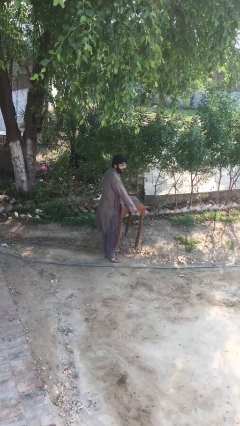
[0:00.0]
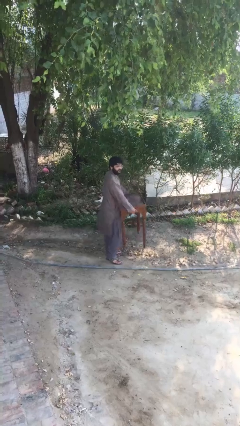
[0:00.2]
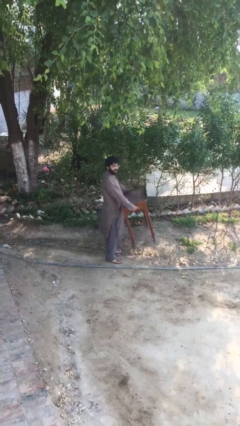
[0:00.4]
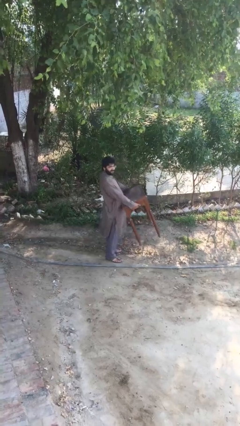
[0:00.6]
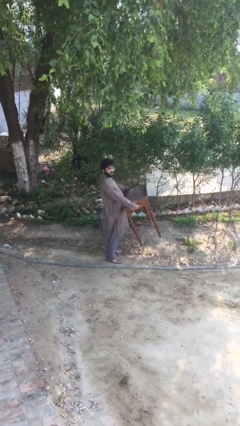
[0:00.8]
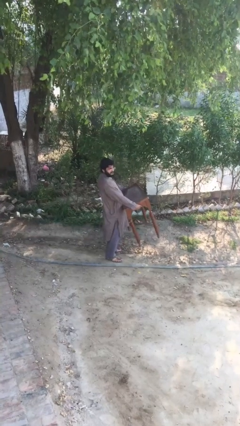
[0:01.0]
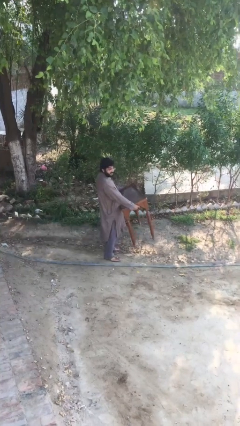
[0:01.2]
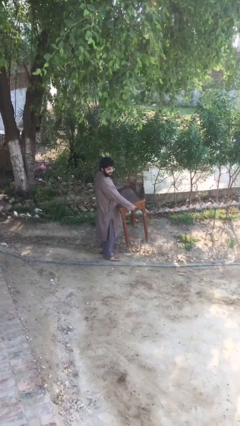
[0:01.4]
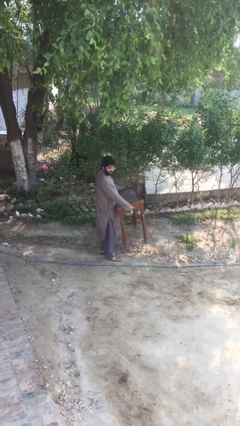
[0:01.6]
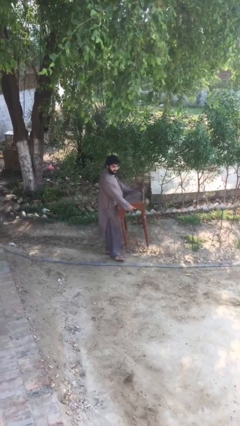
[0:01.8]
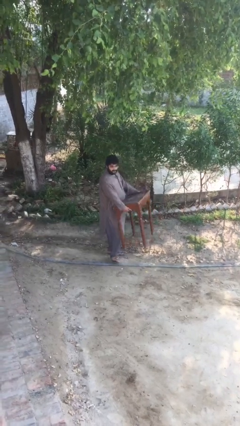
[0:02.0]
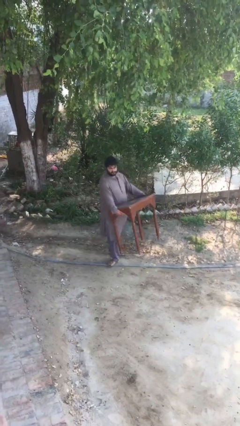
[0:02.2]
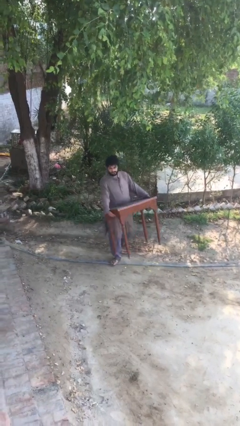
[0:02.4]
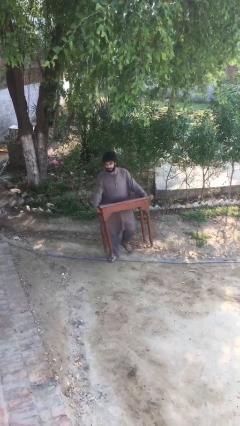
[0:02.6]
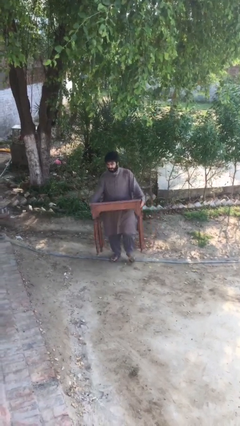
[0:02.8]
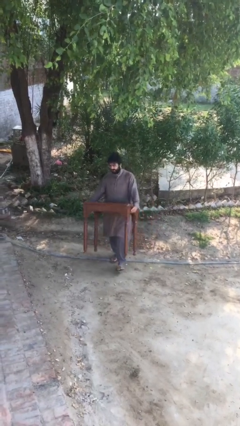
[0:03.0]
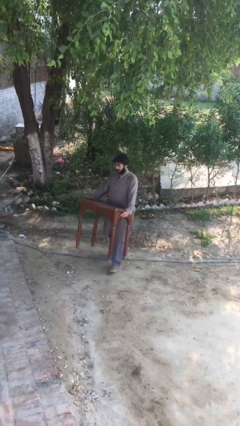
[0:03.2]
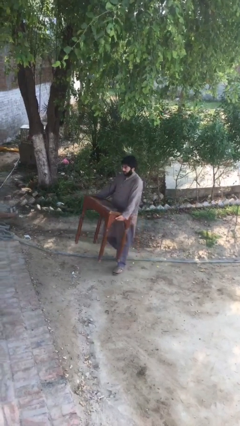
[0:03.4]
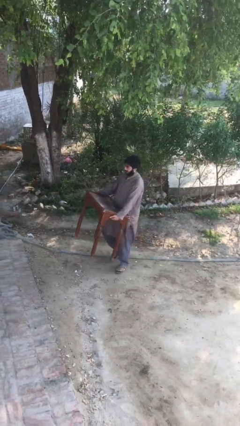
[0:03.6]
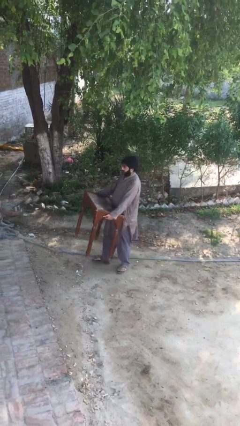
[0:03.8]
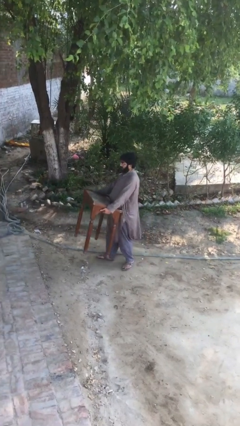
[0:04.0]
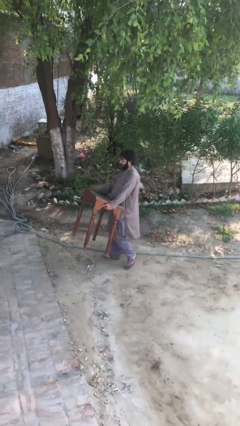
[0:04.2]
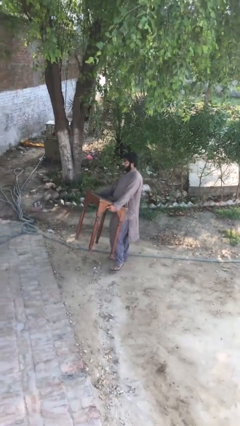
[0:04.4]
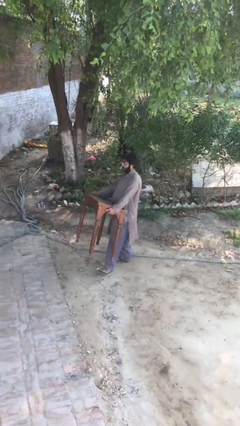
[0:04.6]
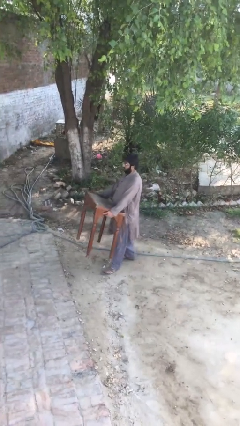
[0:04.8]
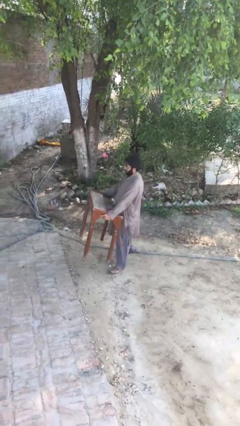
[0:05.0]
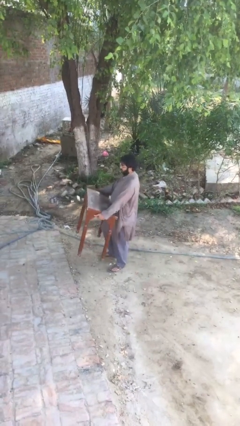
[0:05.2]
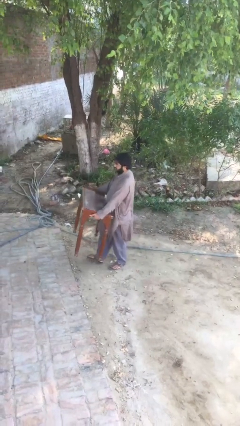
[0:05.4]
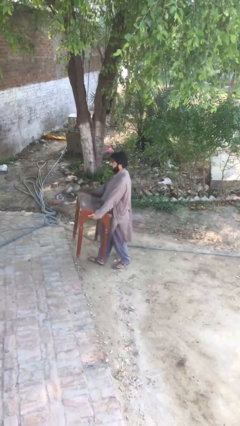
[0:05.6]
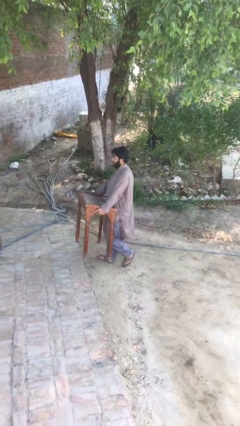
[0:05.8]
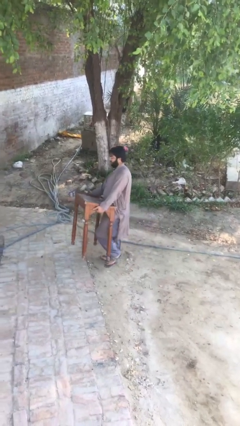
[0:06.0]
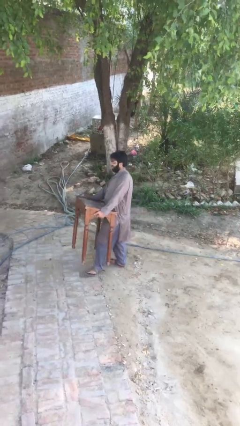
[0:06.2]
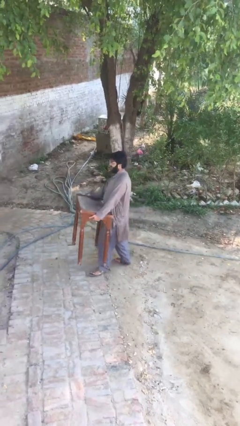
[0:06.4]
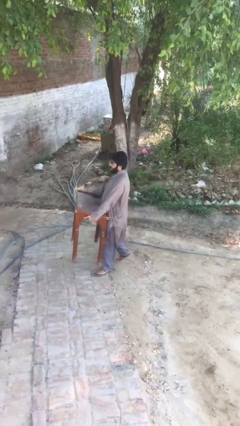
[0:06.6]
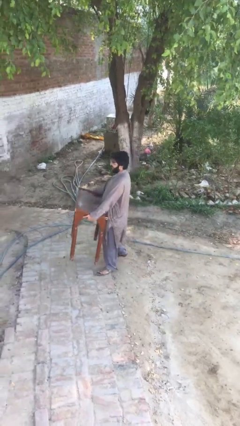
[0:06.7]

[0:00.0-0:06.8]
person carries heavy object

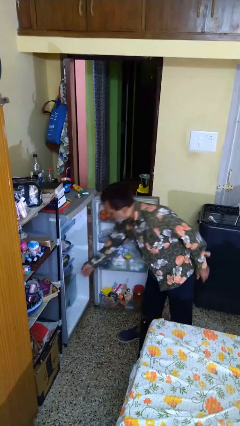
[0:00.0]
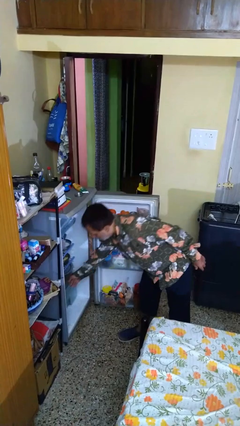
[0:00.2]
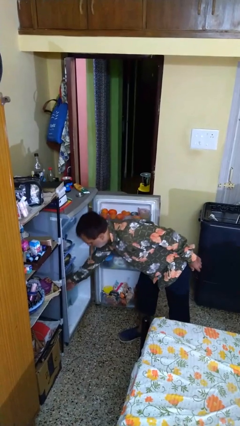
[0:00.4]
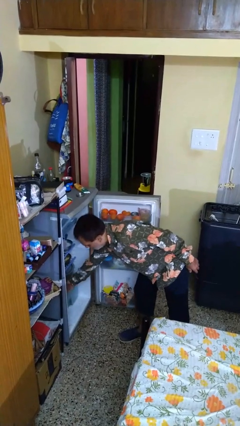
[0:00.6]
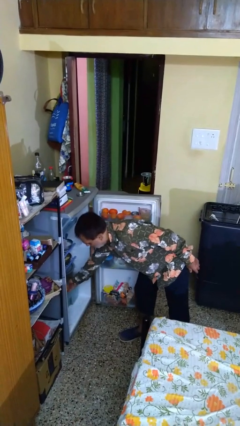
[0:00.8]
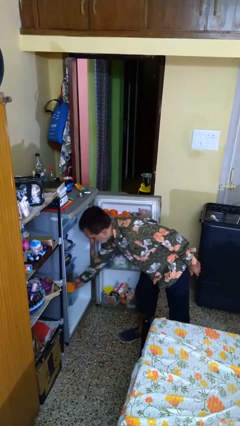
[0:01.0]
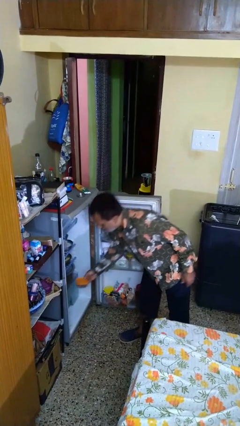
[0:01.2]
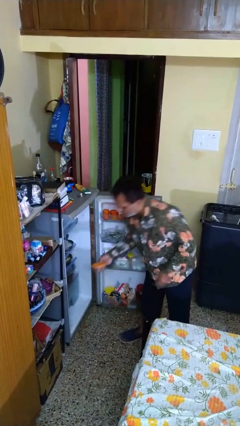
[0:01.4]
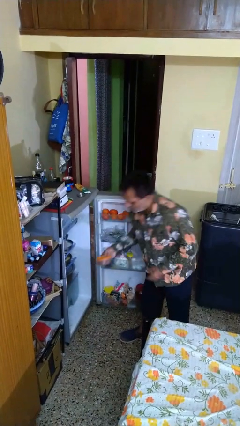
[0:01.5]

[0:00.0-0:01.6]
person takes object from refrigerator

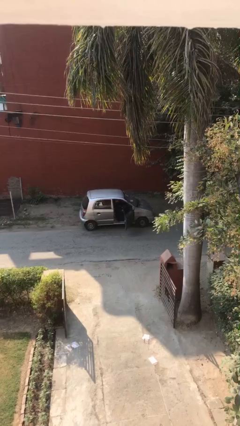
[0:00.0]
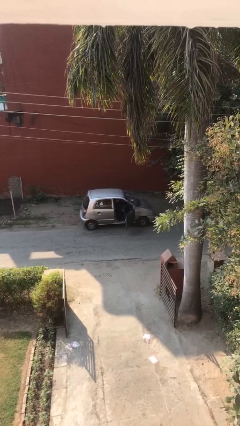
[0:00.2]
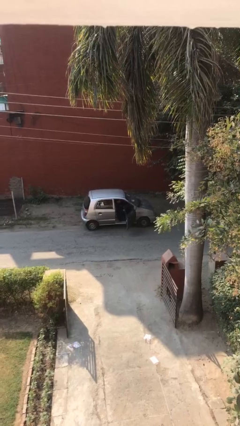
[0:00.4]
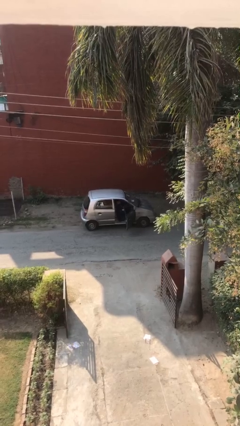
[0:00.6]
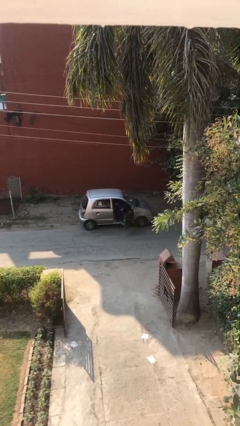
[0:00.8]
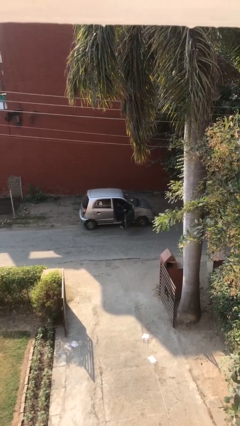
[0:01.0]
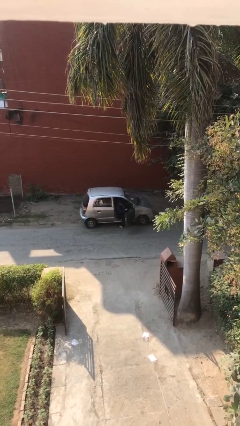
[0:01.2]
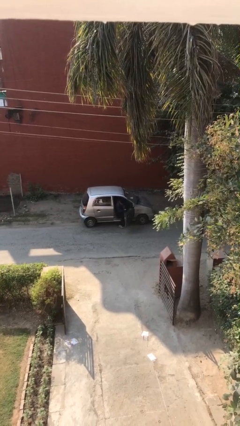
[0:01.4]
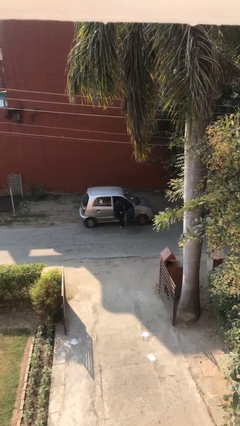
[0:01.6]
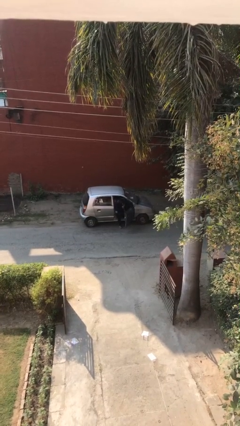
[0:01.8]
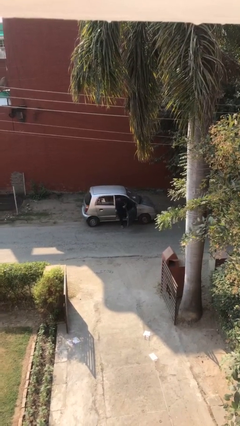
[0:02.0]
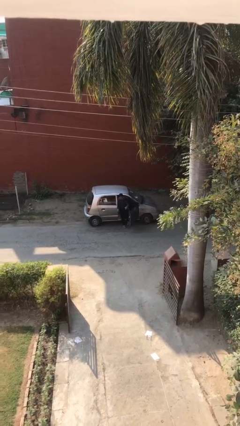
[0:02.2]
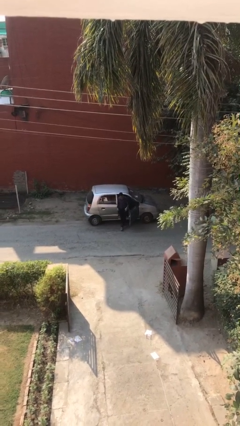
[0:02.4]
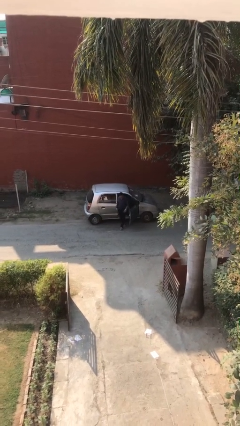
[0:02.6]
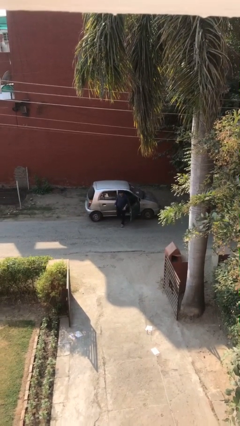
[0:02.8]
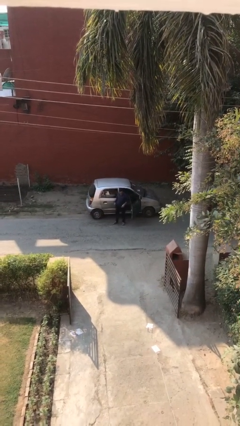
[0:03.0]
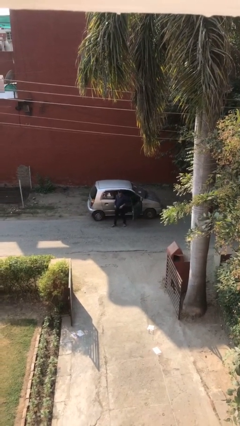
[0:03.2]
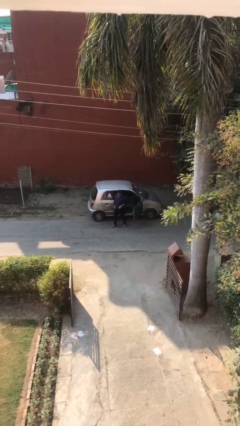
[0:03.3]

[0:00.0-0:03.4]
person exits car

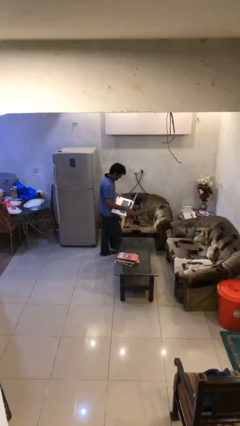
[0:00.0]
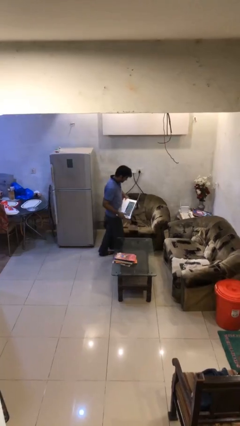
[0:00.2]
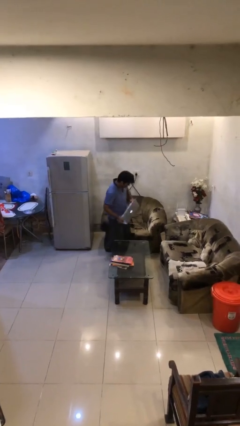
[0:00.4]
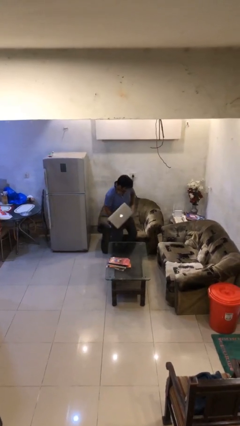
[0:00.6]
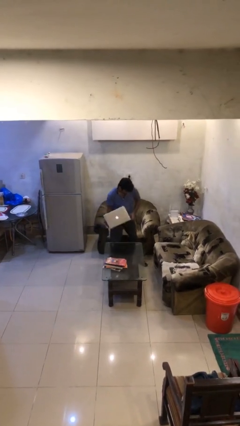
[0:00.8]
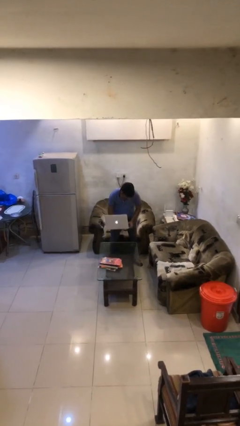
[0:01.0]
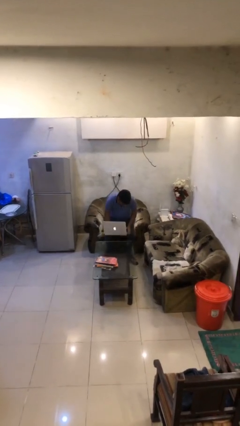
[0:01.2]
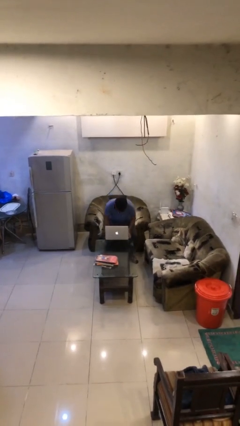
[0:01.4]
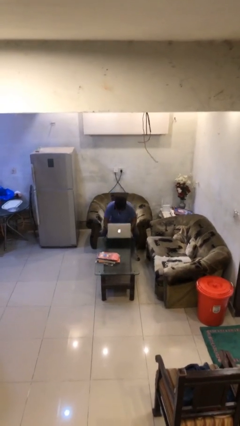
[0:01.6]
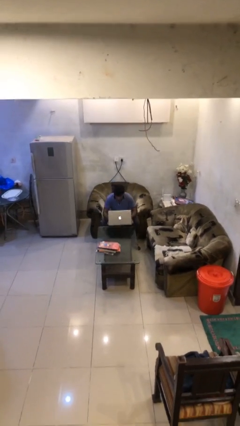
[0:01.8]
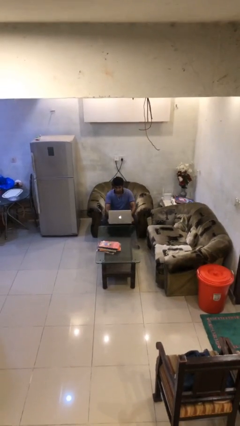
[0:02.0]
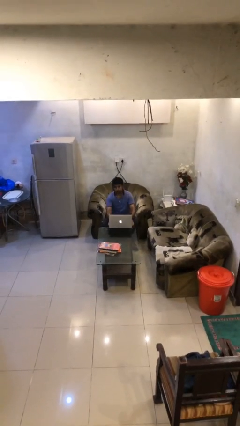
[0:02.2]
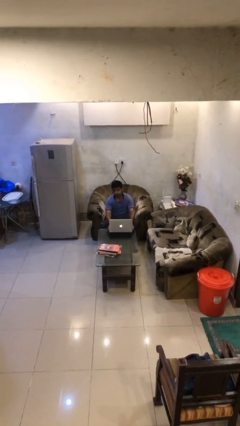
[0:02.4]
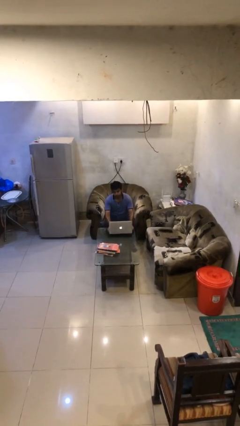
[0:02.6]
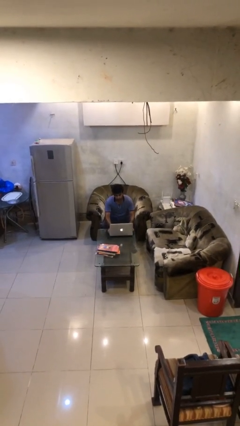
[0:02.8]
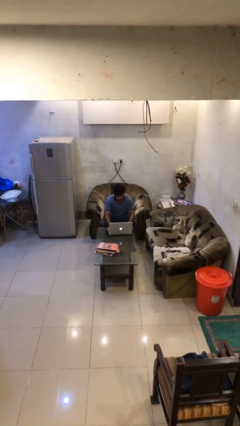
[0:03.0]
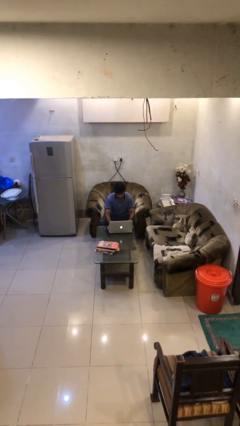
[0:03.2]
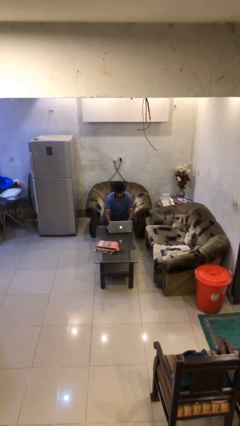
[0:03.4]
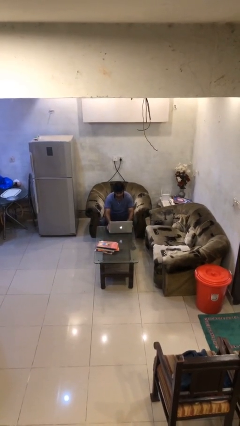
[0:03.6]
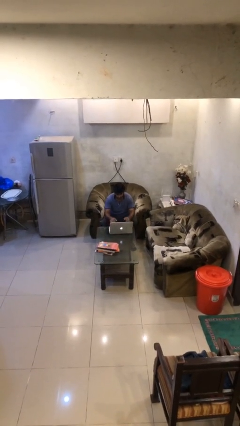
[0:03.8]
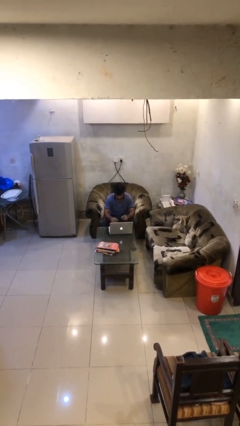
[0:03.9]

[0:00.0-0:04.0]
person sits down

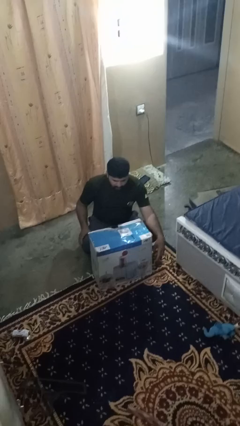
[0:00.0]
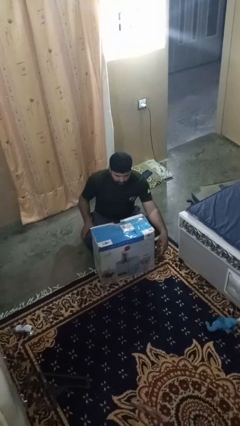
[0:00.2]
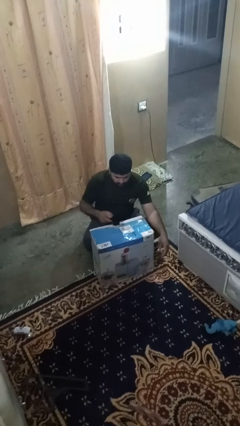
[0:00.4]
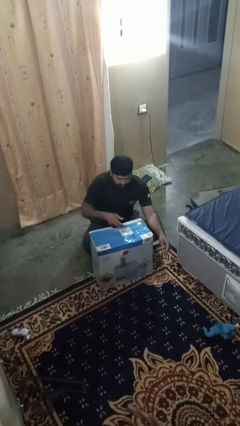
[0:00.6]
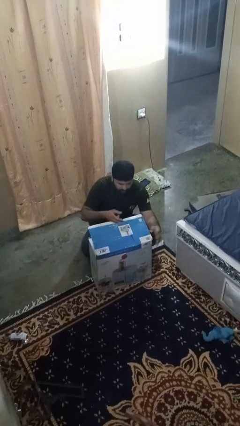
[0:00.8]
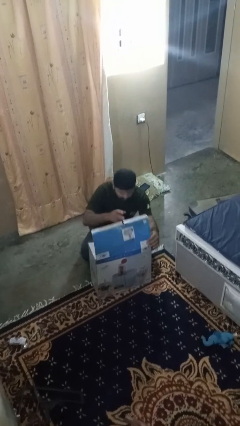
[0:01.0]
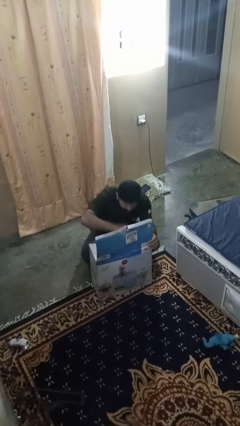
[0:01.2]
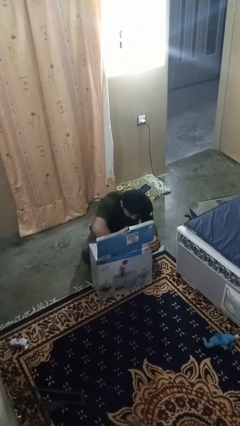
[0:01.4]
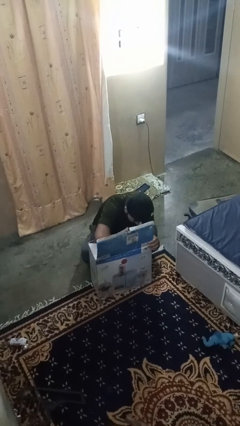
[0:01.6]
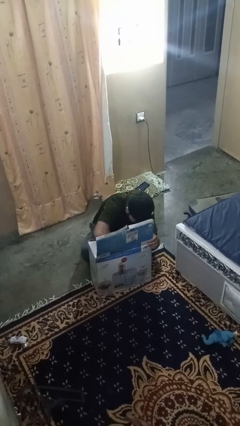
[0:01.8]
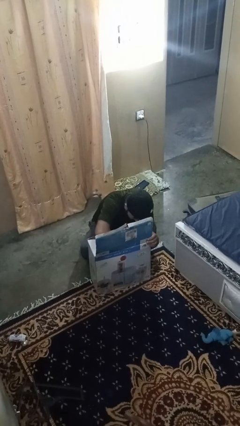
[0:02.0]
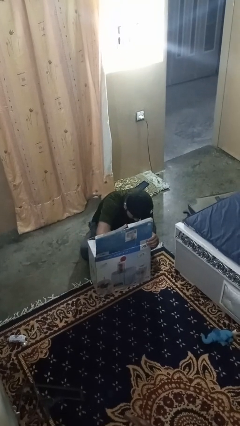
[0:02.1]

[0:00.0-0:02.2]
person searches in box
